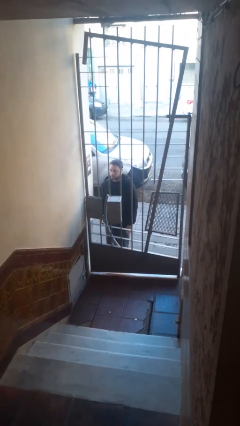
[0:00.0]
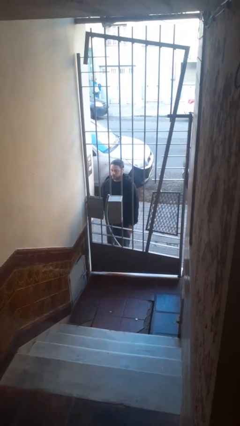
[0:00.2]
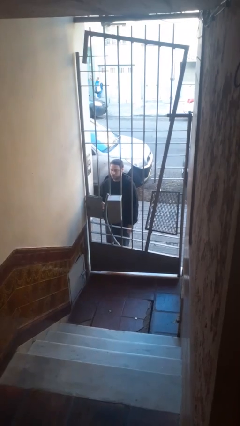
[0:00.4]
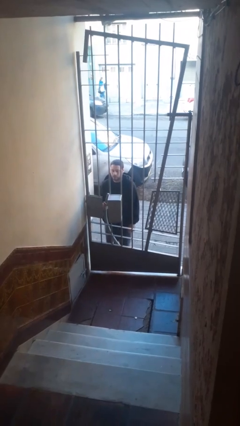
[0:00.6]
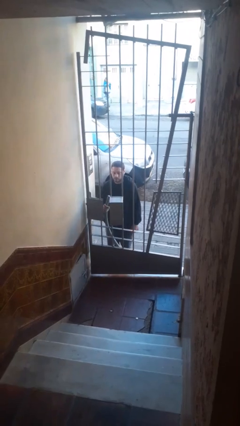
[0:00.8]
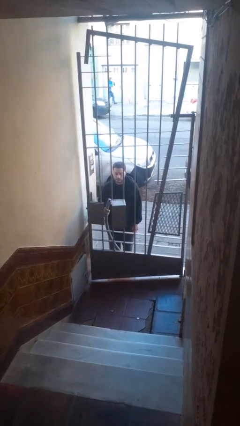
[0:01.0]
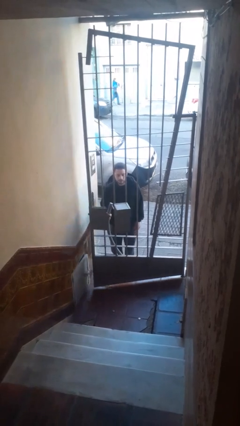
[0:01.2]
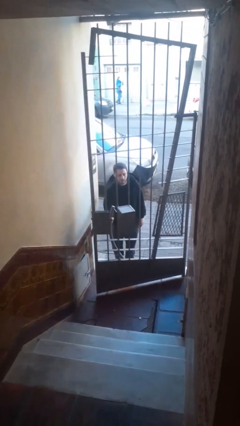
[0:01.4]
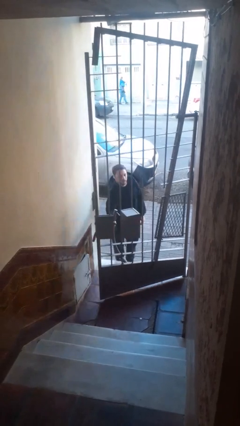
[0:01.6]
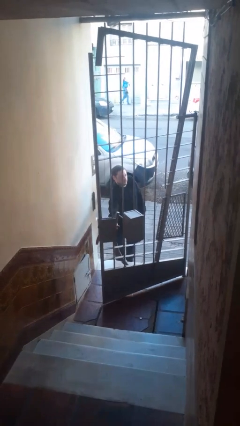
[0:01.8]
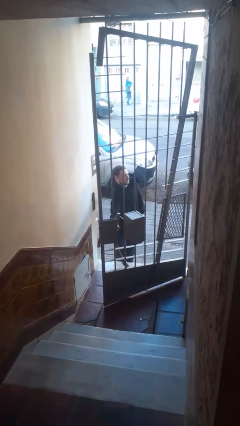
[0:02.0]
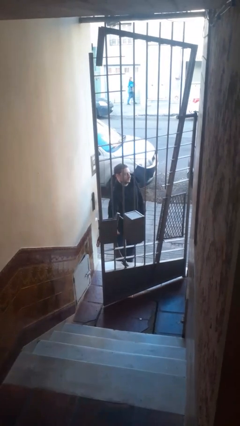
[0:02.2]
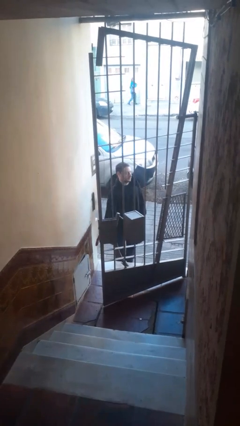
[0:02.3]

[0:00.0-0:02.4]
person opens gate

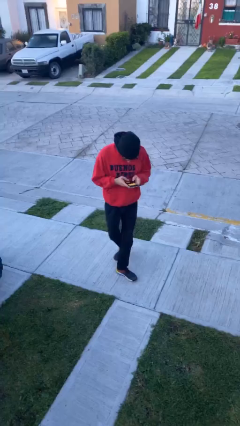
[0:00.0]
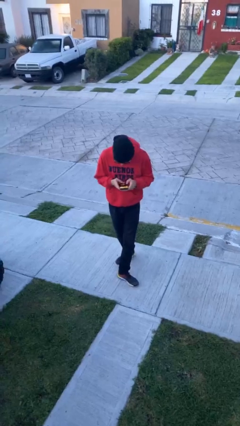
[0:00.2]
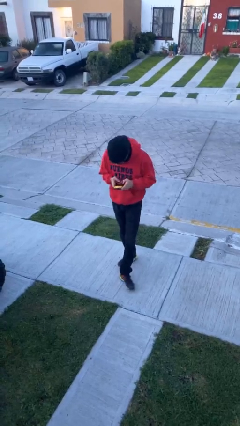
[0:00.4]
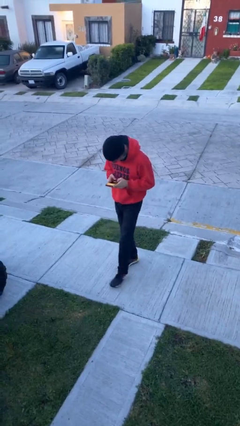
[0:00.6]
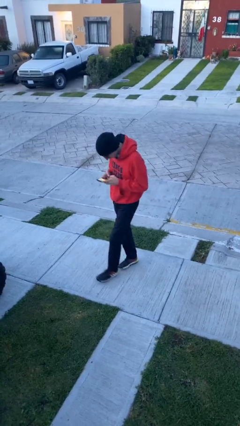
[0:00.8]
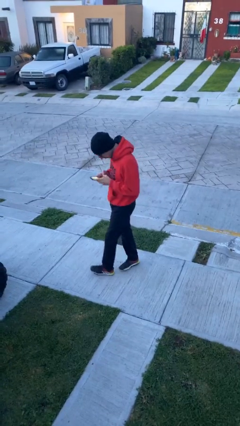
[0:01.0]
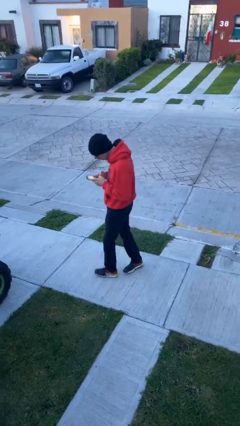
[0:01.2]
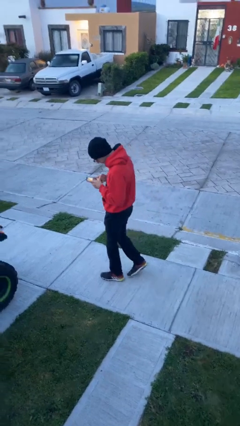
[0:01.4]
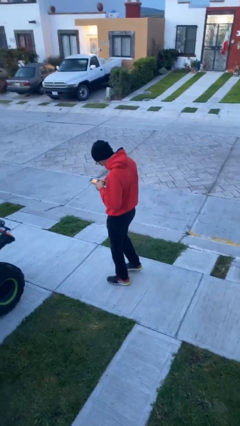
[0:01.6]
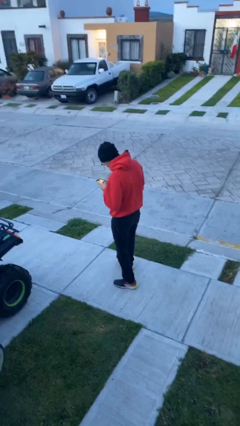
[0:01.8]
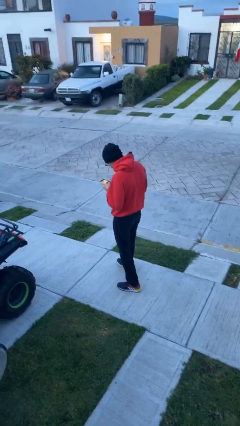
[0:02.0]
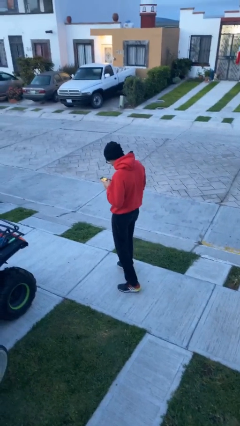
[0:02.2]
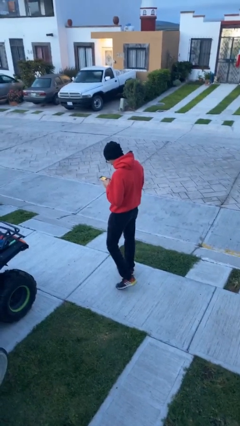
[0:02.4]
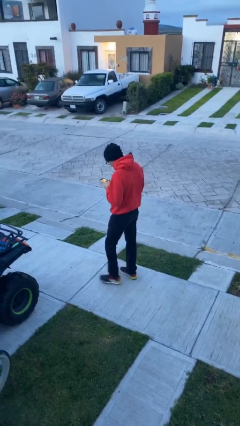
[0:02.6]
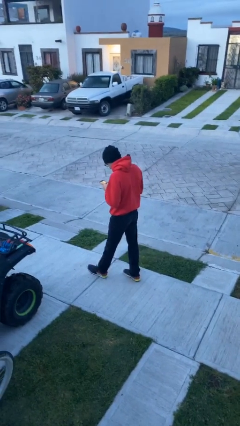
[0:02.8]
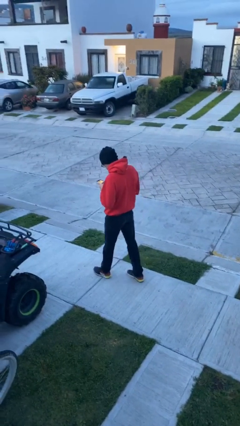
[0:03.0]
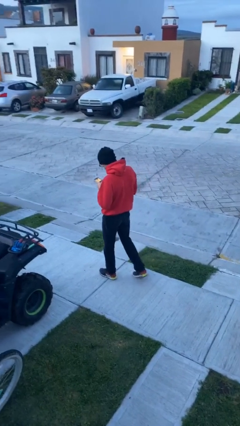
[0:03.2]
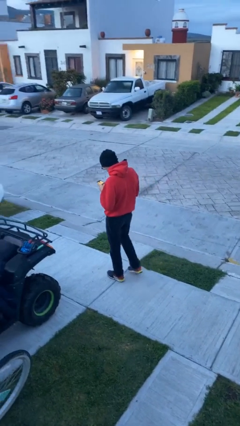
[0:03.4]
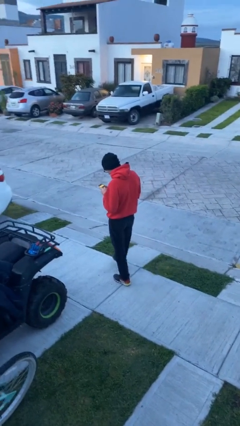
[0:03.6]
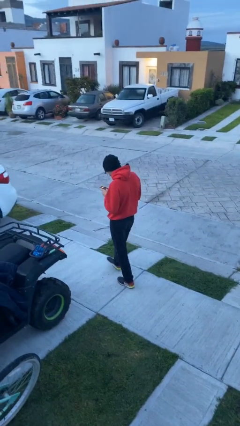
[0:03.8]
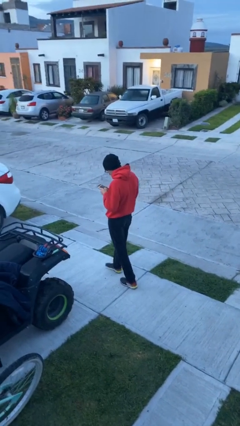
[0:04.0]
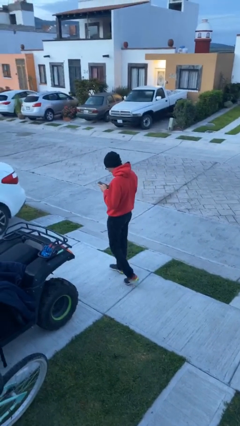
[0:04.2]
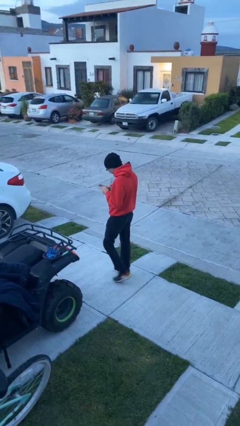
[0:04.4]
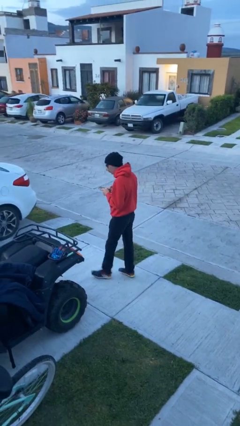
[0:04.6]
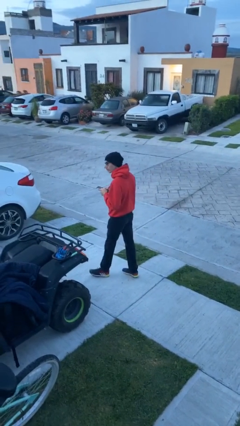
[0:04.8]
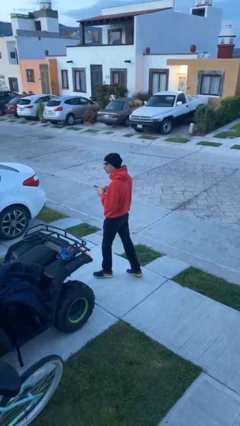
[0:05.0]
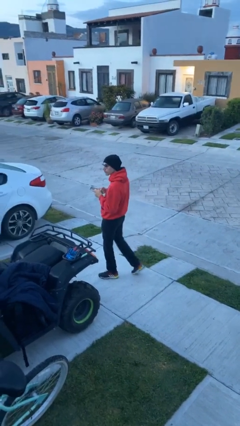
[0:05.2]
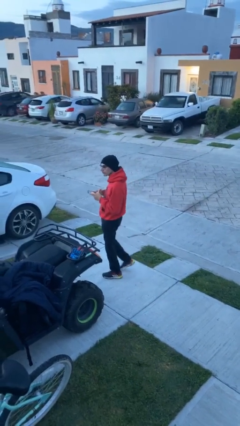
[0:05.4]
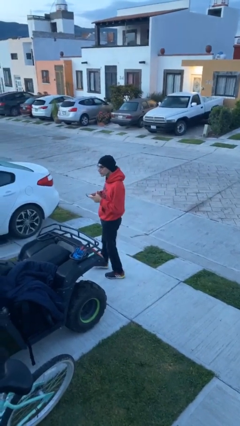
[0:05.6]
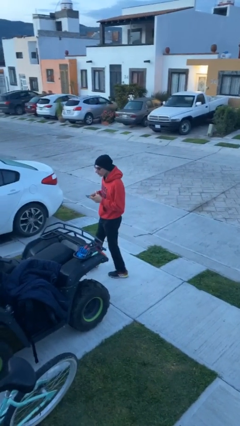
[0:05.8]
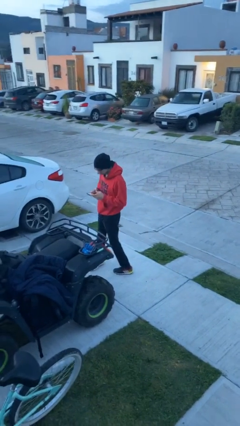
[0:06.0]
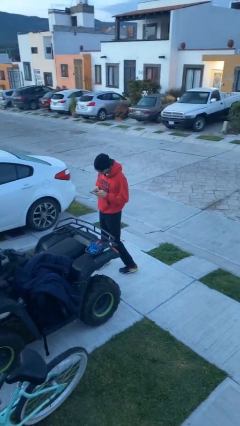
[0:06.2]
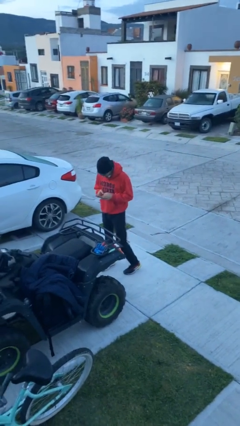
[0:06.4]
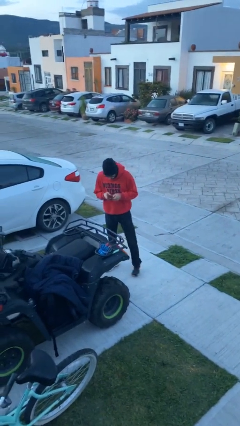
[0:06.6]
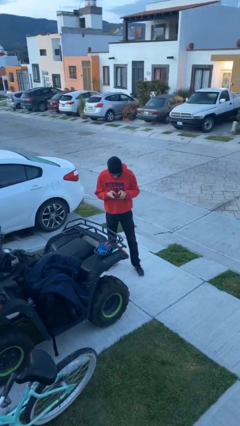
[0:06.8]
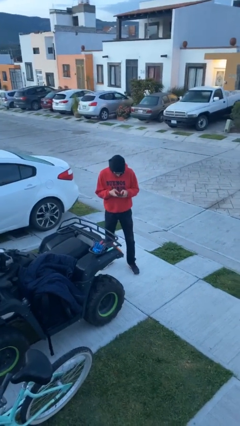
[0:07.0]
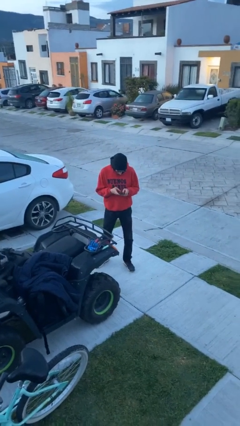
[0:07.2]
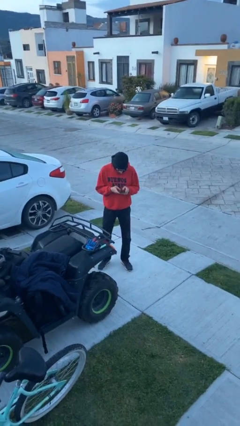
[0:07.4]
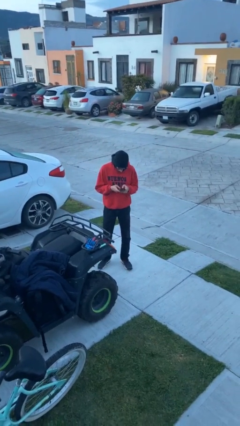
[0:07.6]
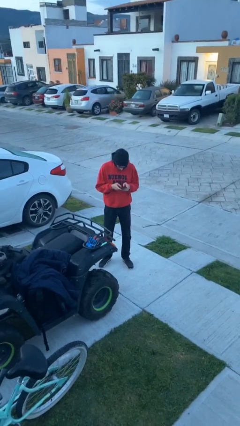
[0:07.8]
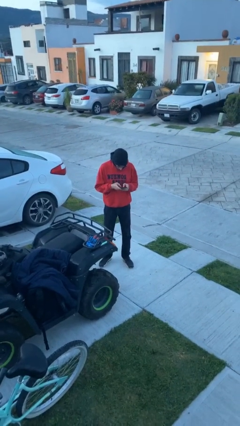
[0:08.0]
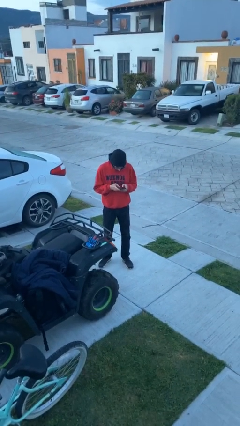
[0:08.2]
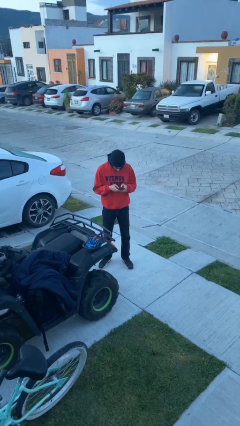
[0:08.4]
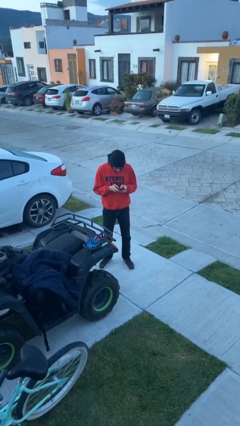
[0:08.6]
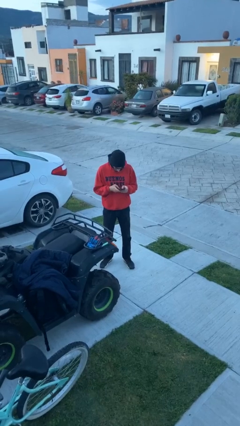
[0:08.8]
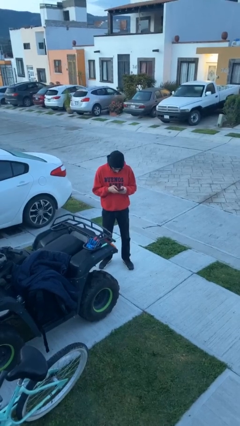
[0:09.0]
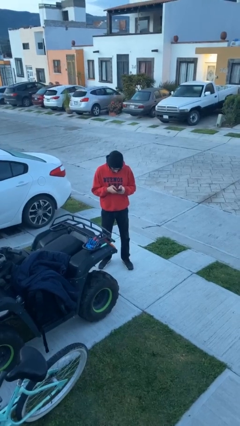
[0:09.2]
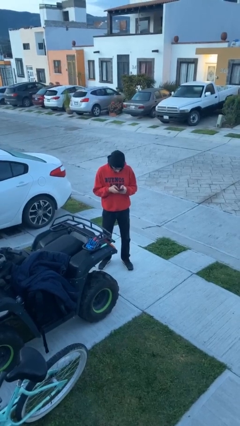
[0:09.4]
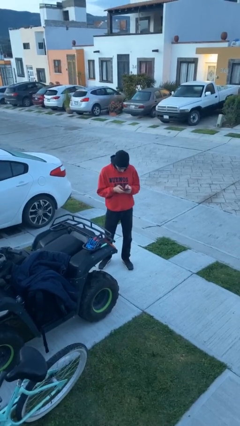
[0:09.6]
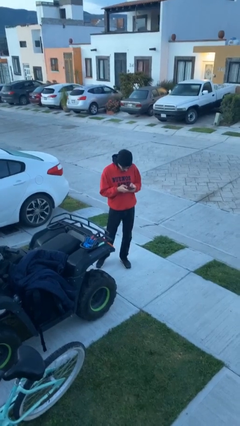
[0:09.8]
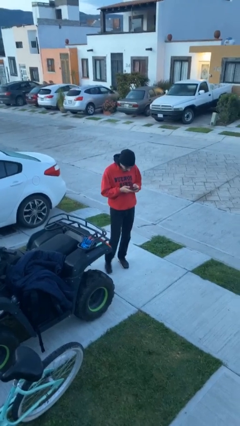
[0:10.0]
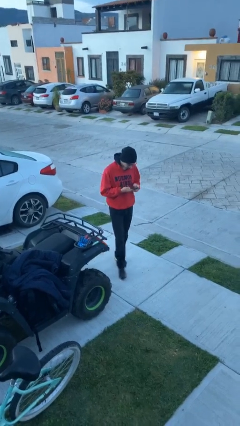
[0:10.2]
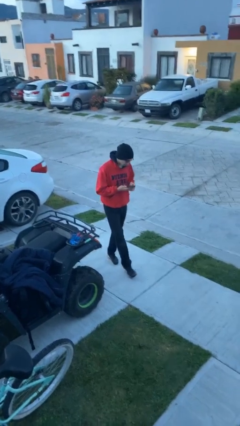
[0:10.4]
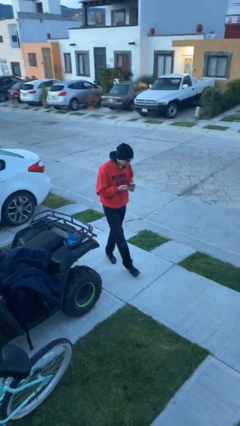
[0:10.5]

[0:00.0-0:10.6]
person texts on phone

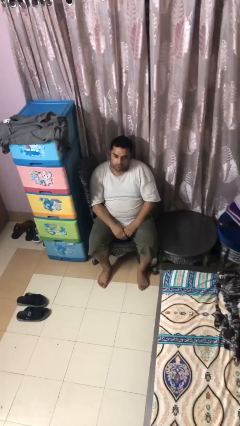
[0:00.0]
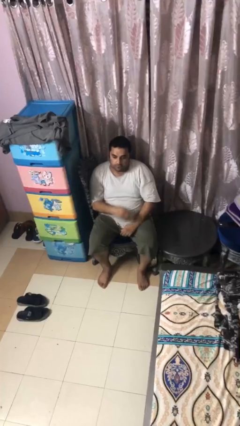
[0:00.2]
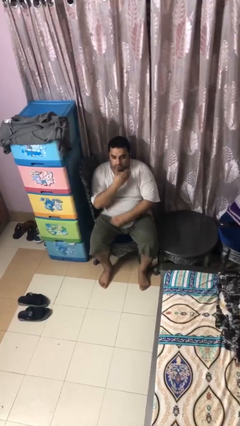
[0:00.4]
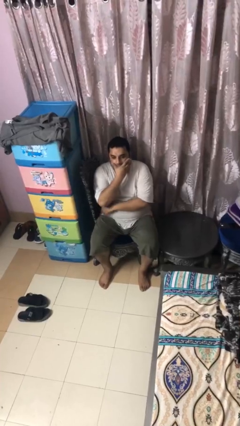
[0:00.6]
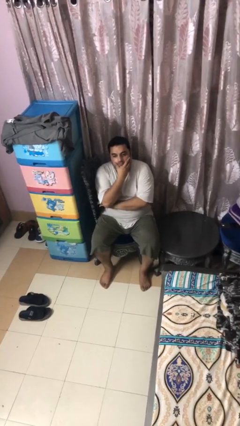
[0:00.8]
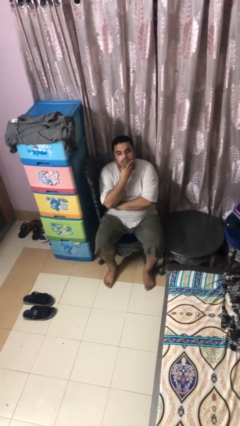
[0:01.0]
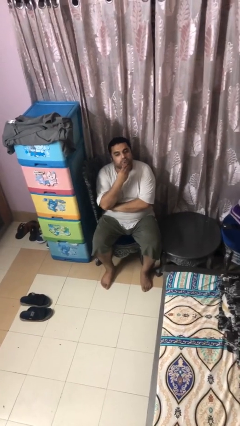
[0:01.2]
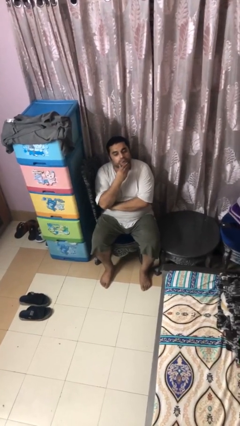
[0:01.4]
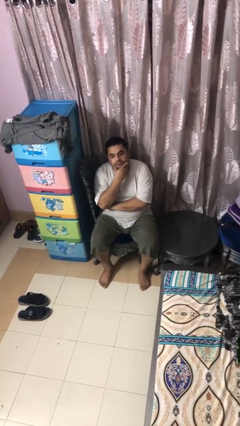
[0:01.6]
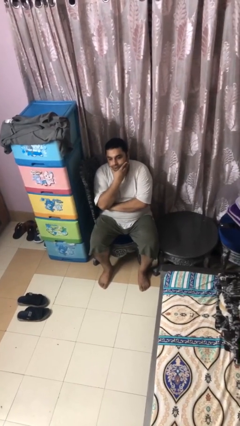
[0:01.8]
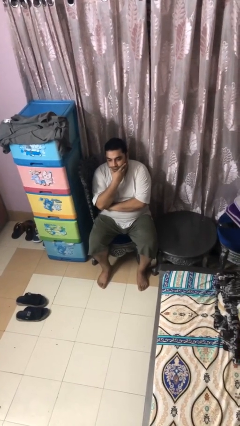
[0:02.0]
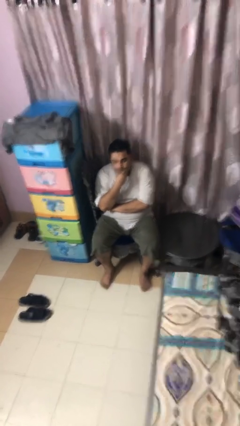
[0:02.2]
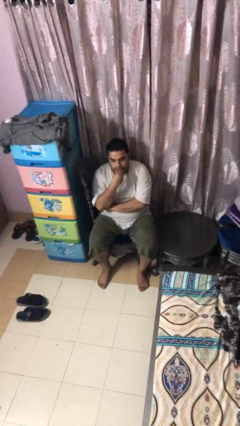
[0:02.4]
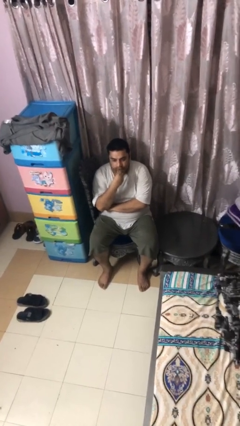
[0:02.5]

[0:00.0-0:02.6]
person strokes chin

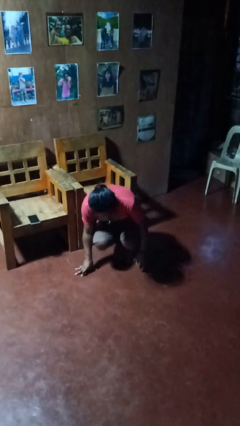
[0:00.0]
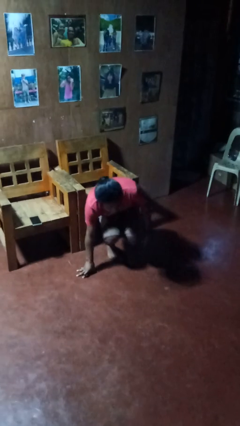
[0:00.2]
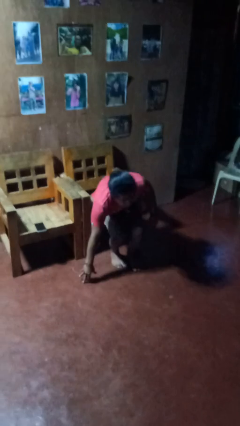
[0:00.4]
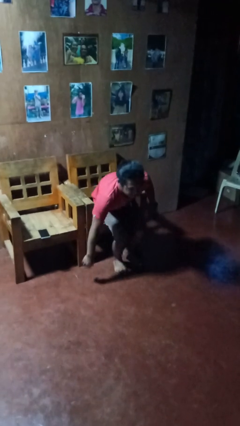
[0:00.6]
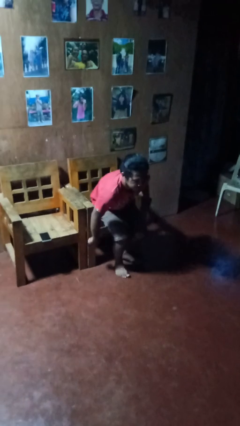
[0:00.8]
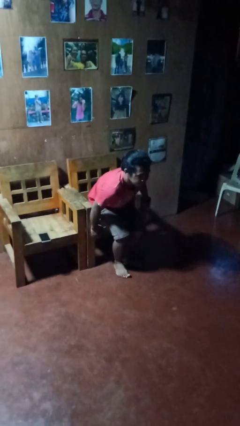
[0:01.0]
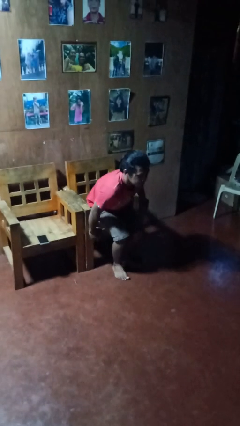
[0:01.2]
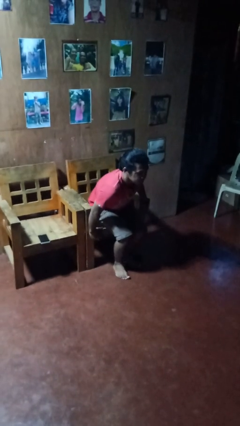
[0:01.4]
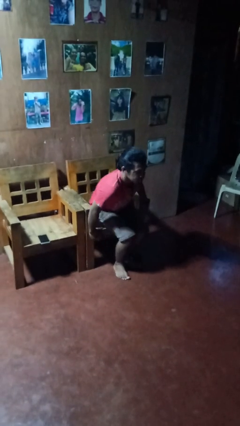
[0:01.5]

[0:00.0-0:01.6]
person stands up from floor

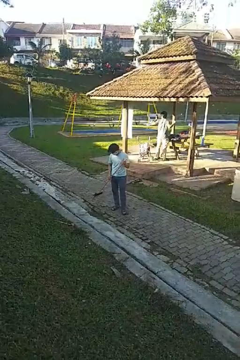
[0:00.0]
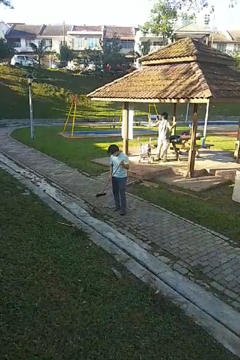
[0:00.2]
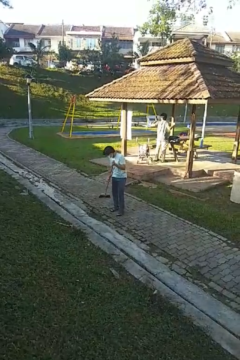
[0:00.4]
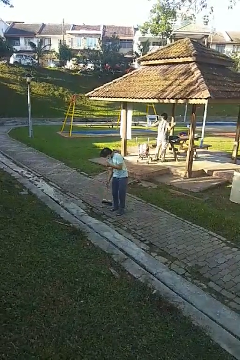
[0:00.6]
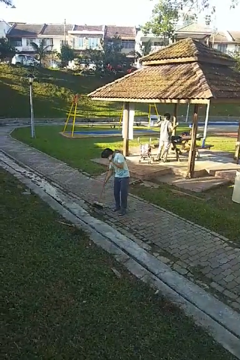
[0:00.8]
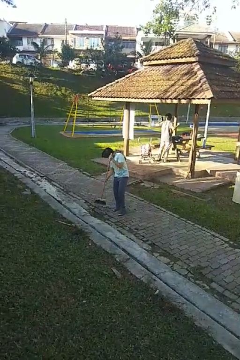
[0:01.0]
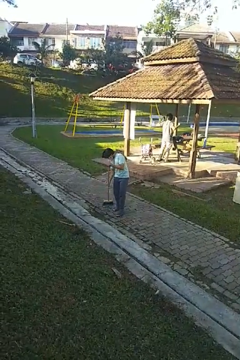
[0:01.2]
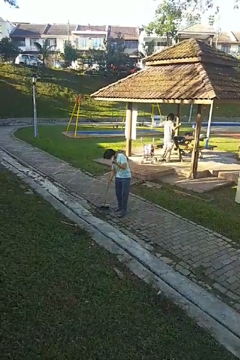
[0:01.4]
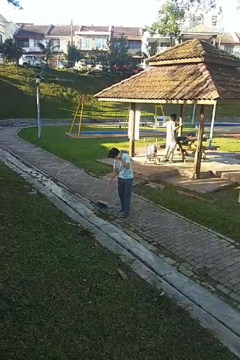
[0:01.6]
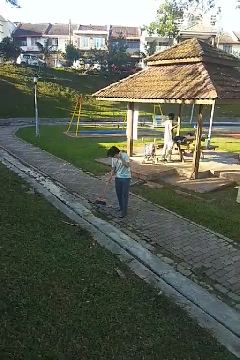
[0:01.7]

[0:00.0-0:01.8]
person sweeps floor
